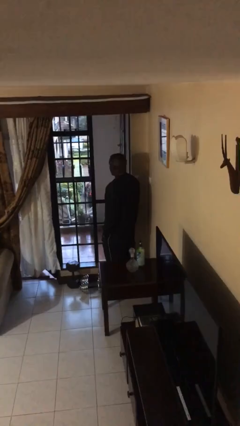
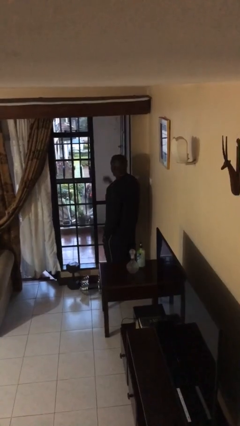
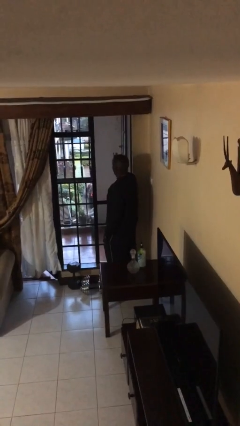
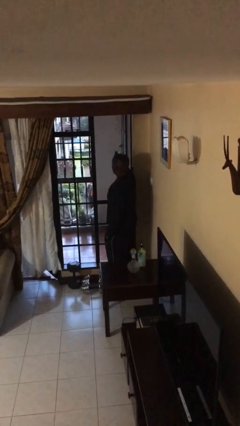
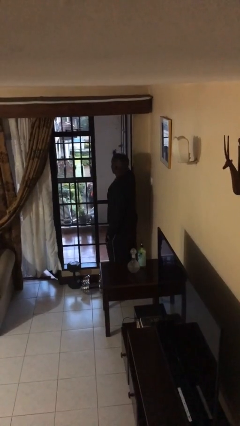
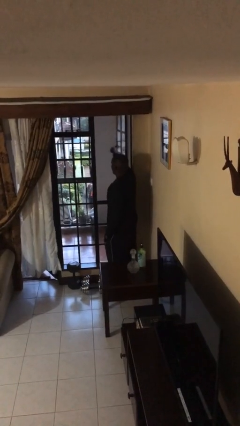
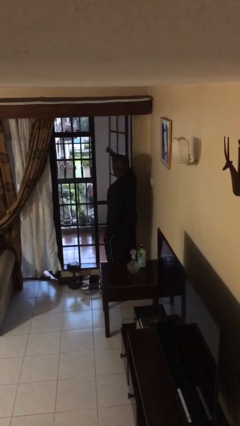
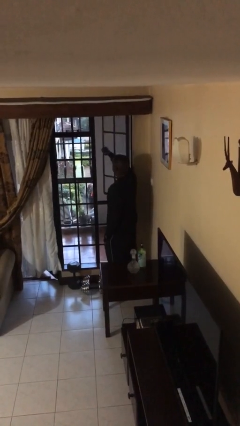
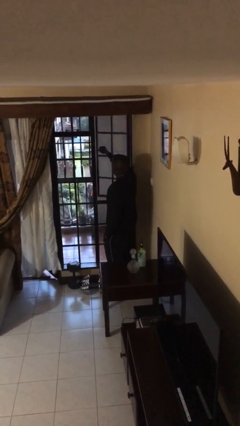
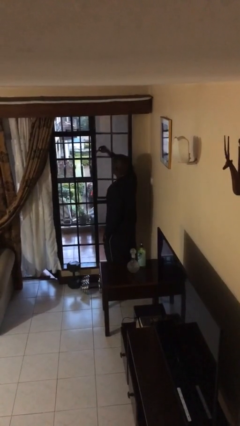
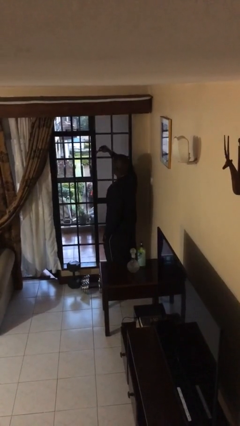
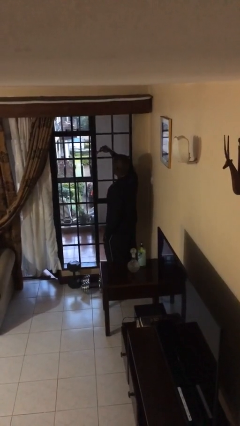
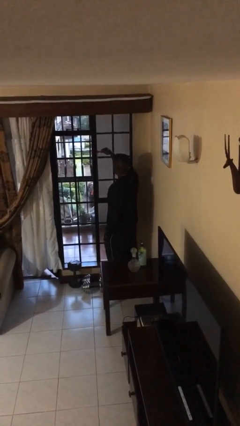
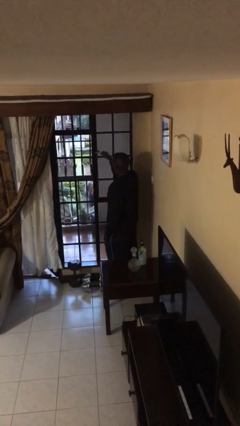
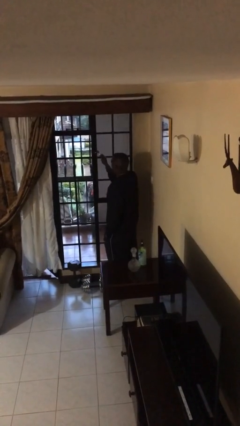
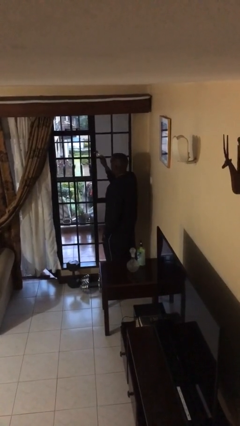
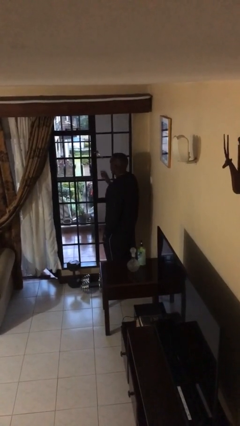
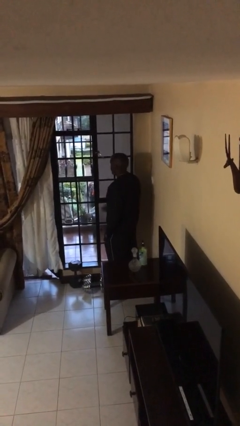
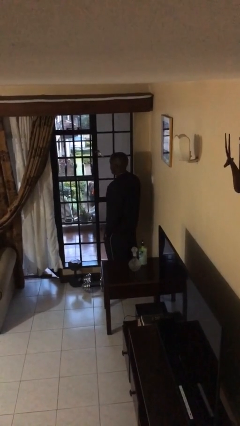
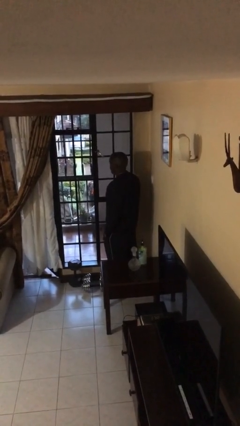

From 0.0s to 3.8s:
person closes home window

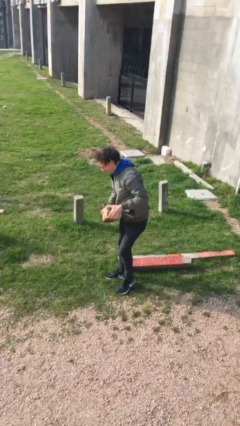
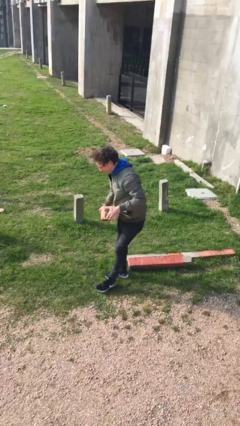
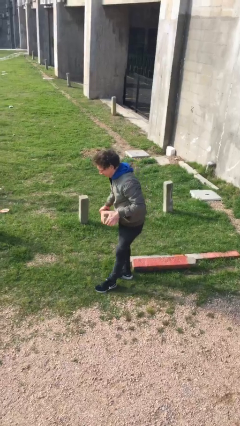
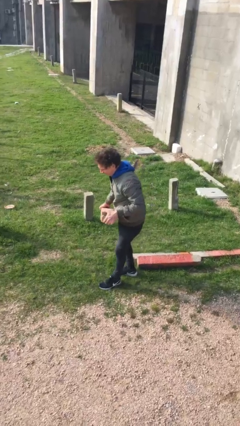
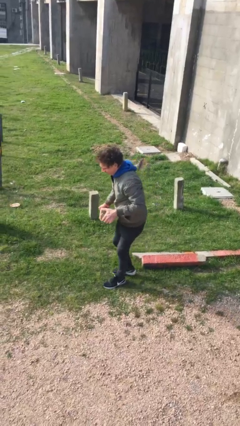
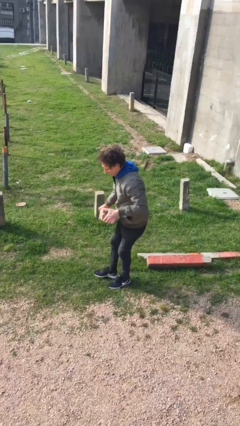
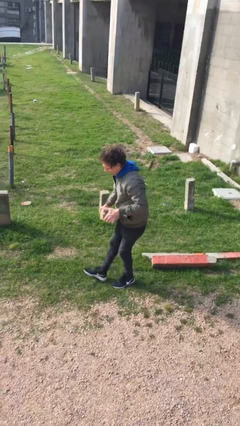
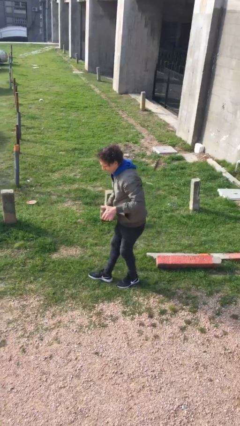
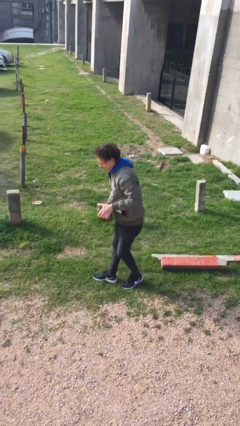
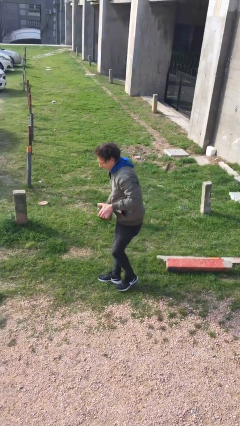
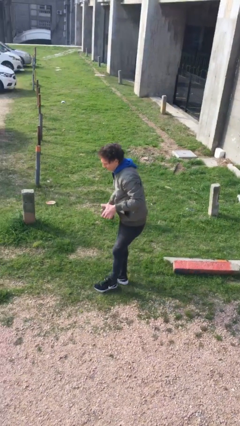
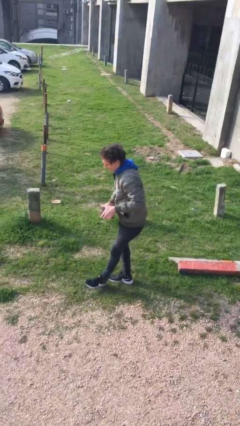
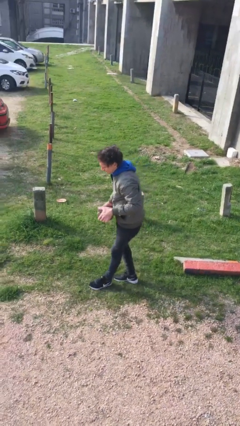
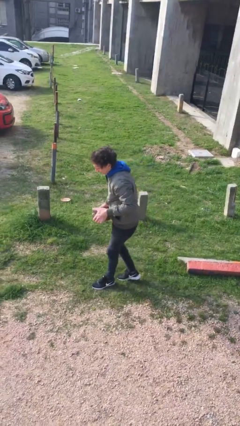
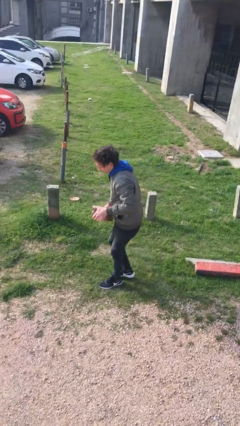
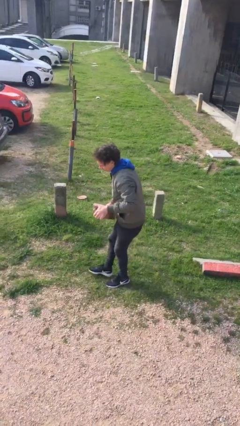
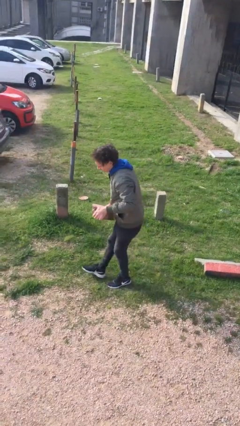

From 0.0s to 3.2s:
person carries heavy object

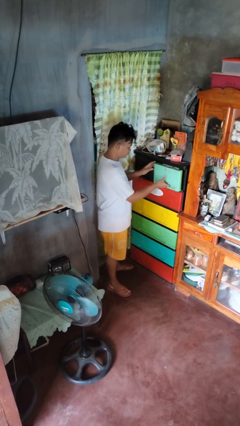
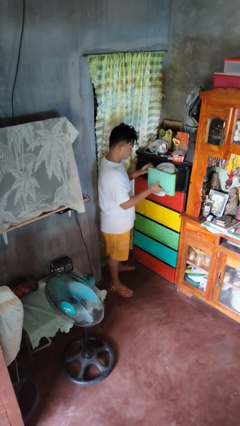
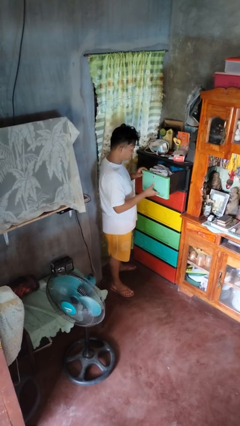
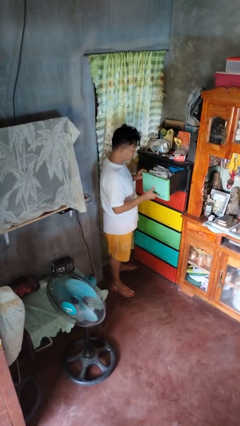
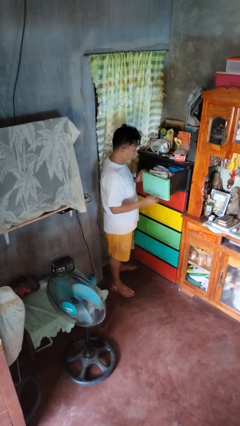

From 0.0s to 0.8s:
person opens dresser drawer

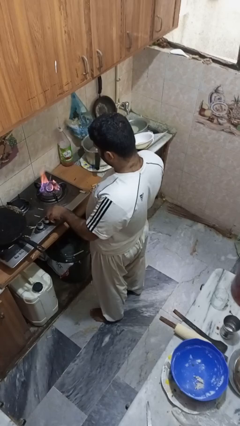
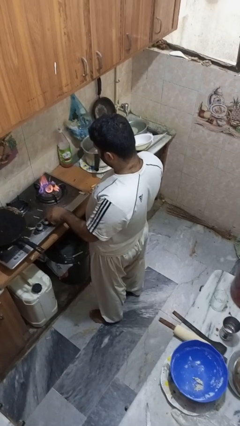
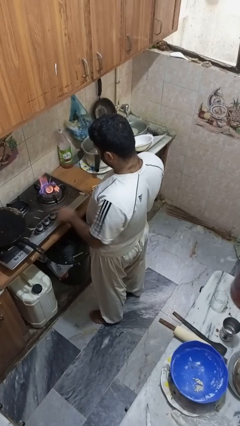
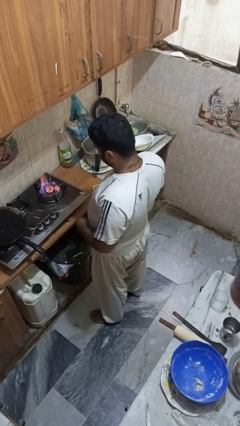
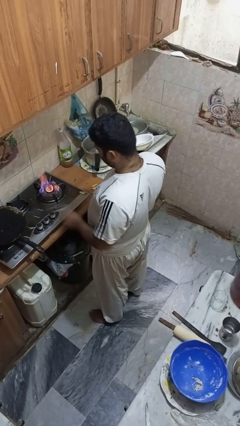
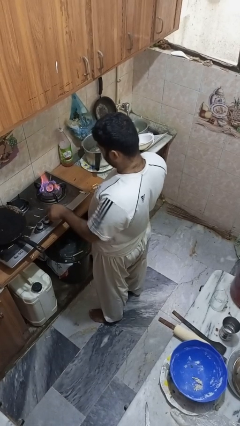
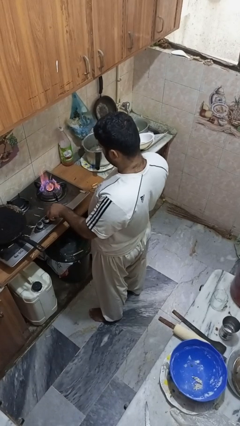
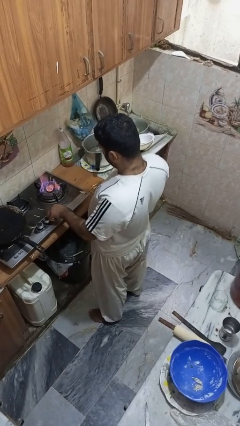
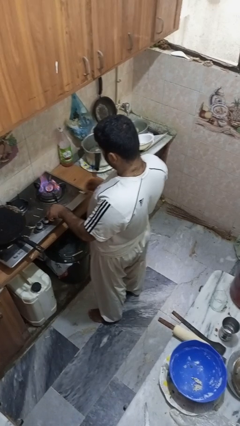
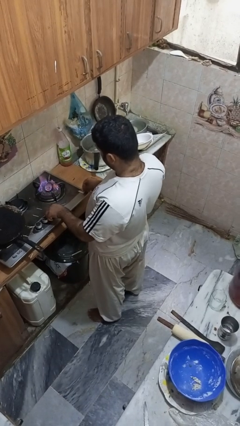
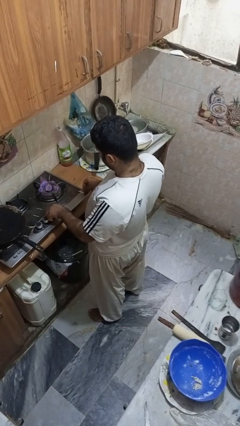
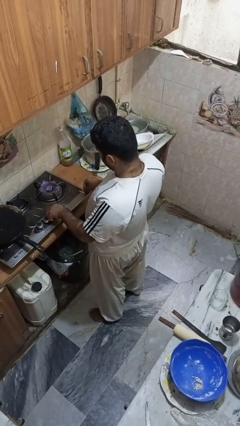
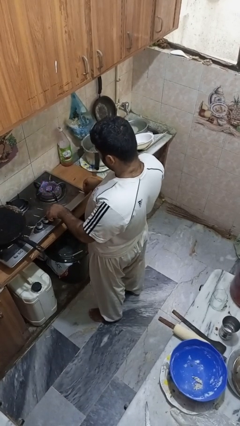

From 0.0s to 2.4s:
person turns off stovetop

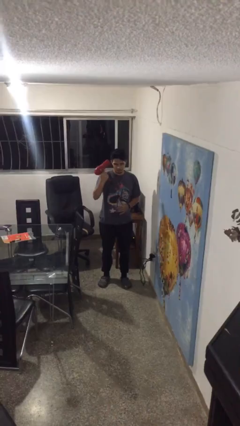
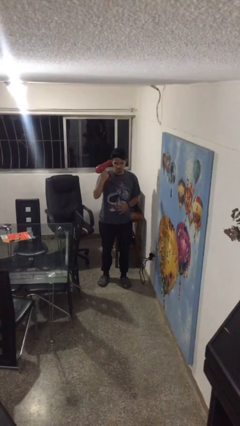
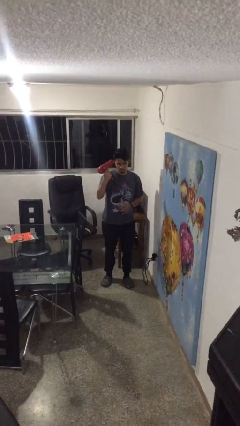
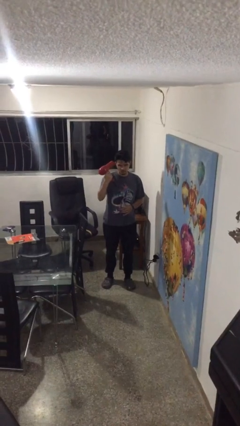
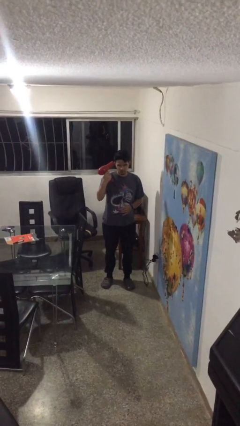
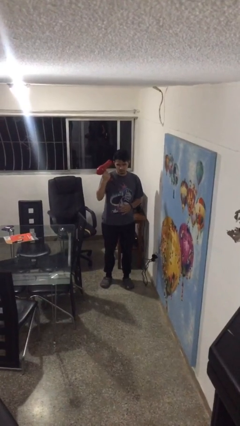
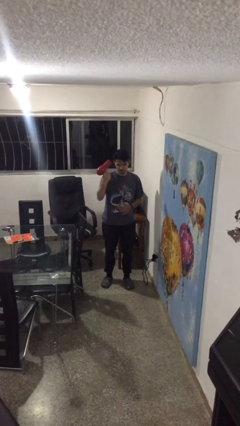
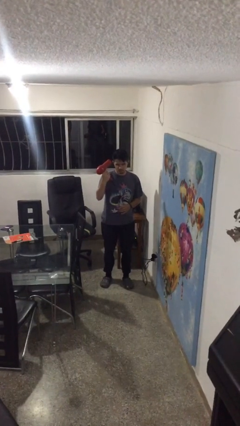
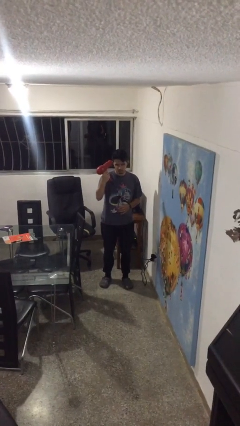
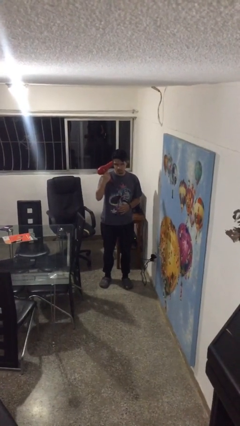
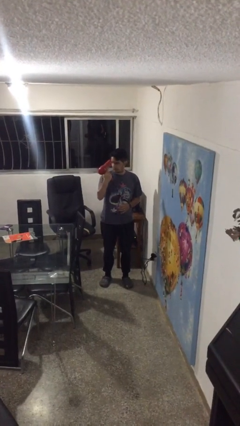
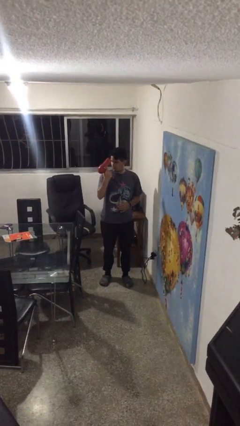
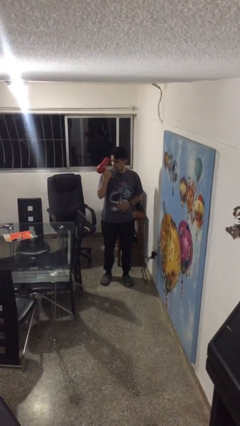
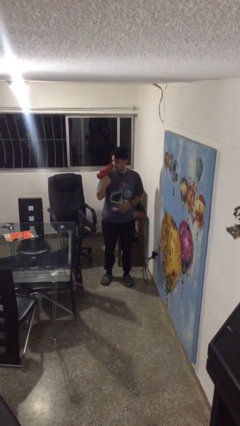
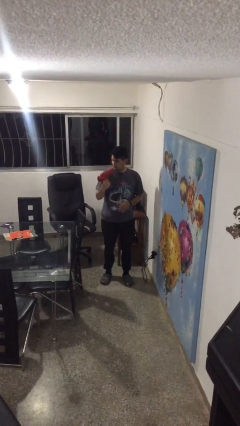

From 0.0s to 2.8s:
person dries hair with hairdryer

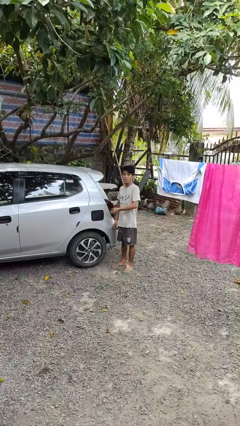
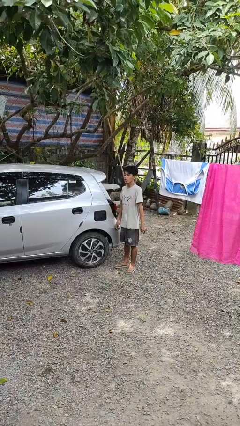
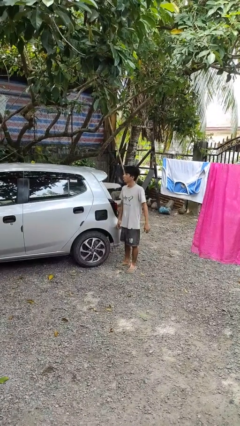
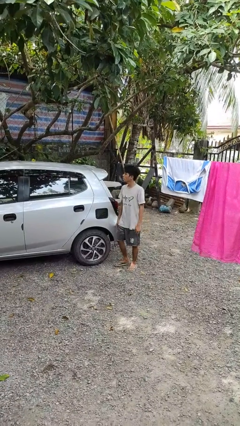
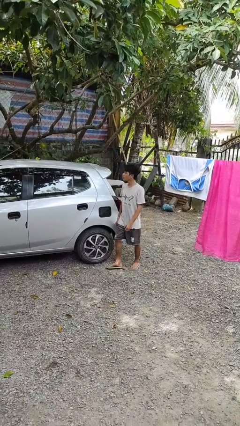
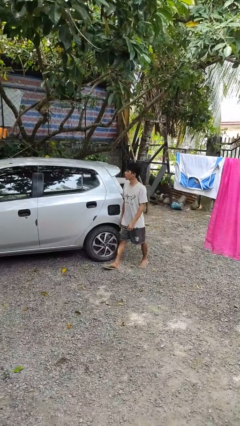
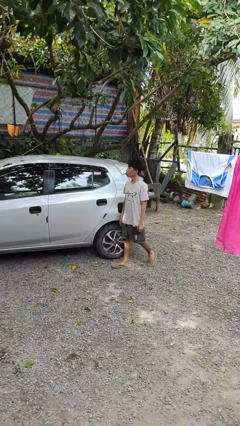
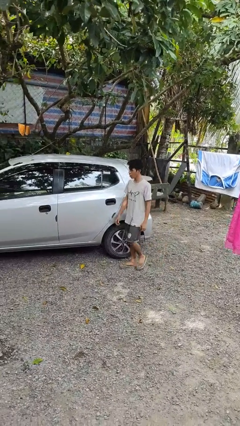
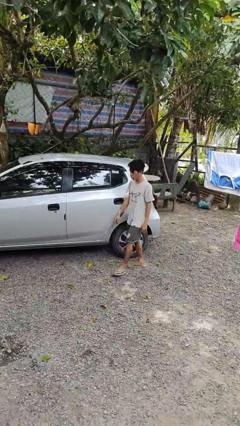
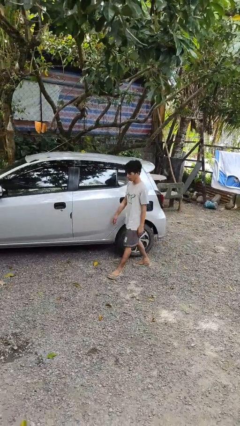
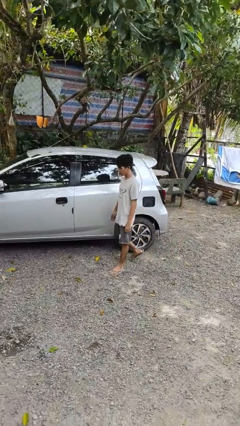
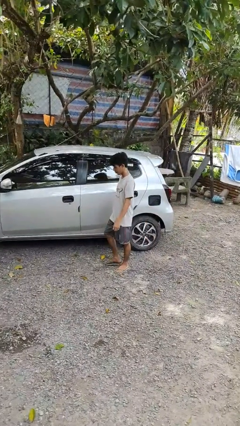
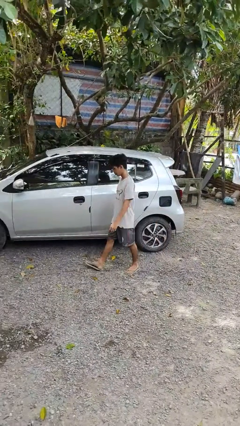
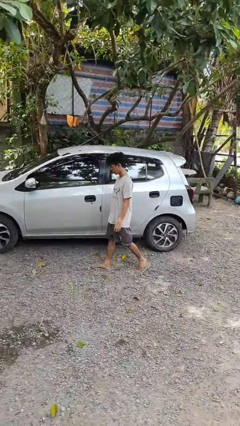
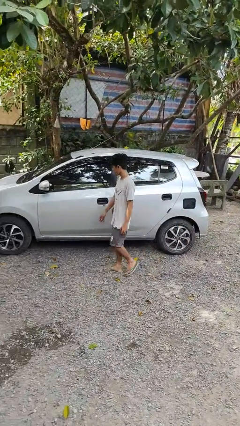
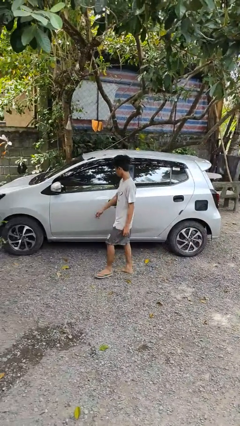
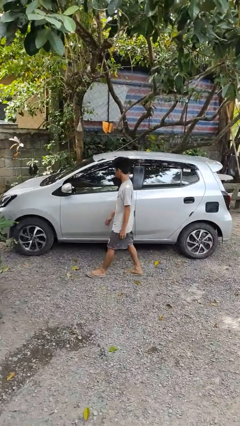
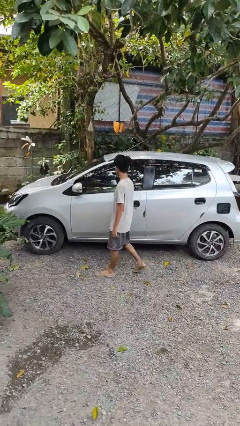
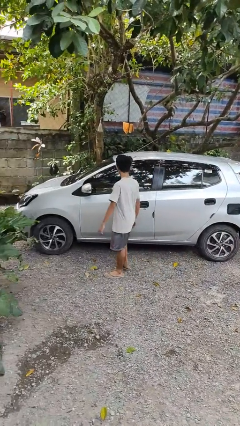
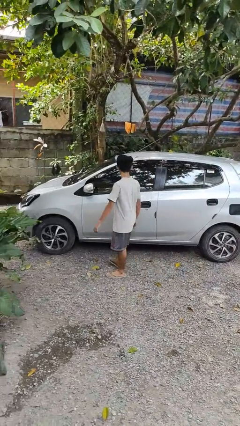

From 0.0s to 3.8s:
person walks around car

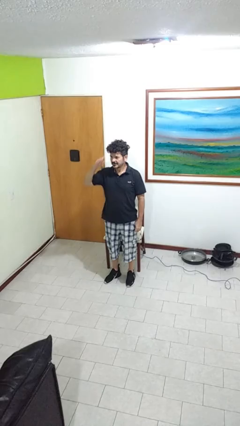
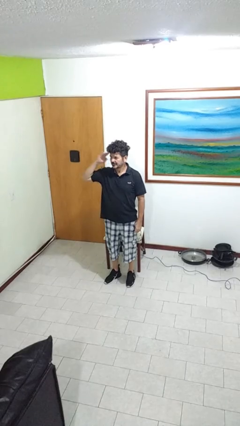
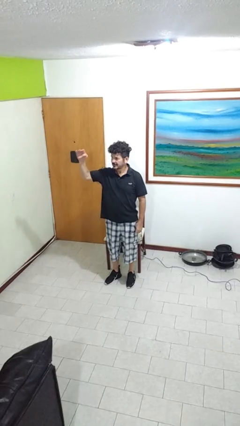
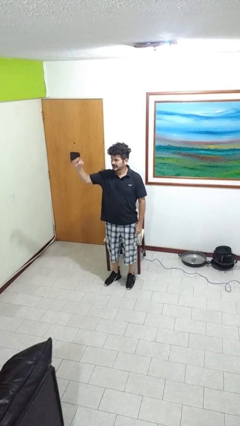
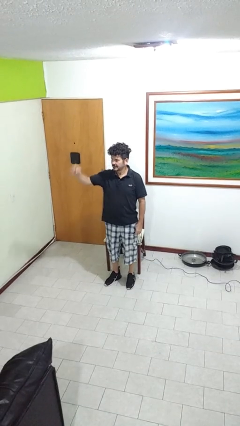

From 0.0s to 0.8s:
person salutes
